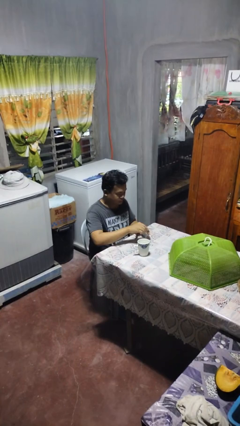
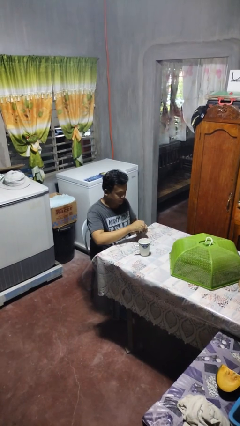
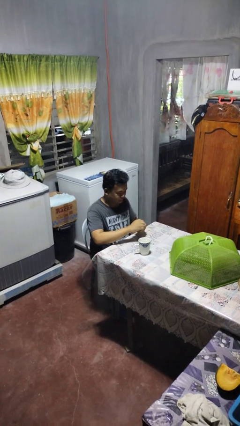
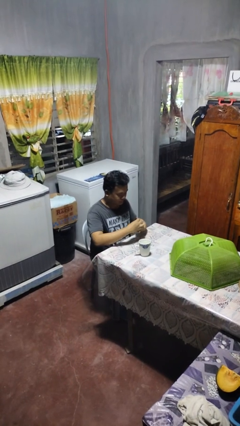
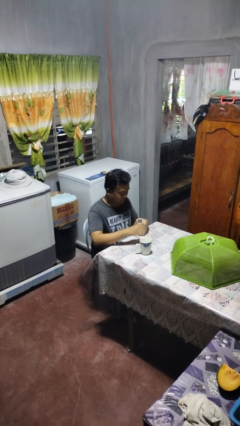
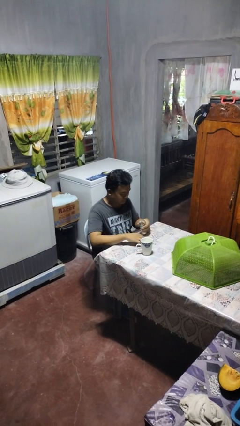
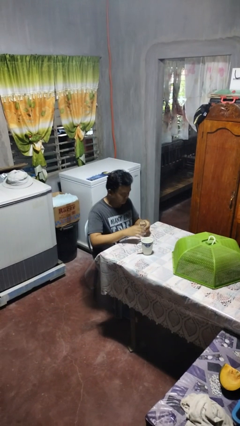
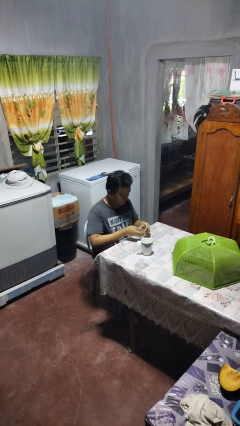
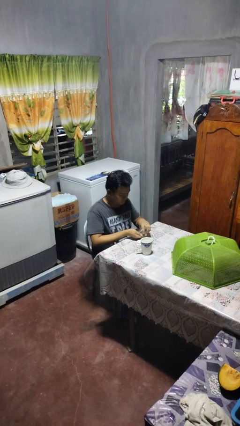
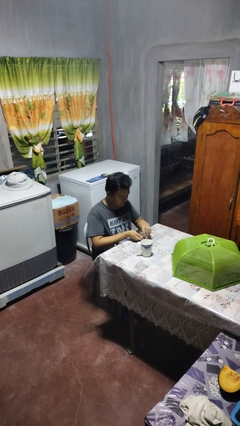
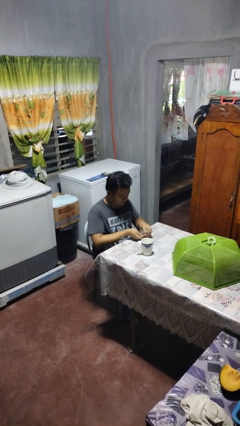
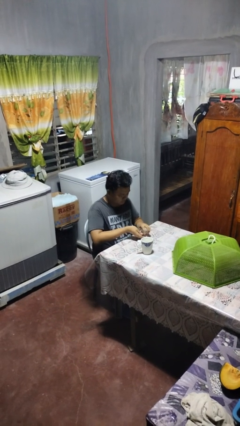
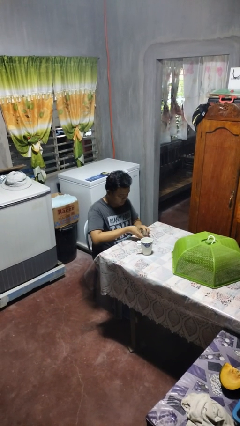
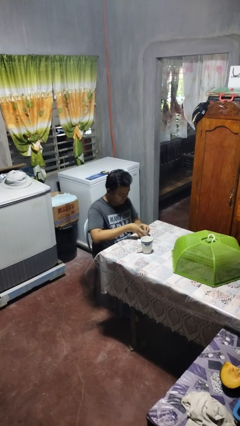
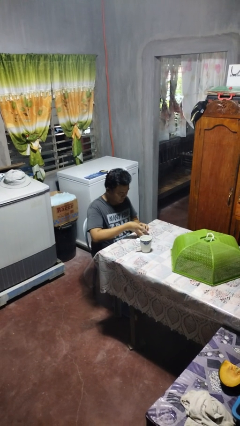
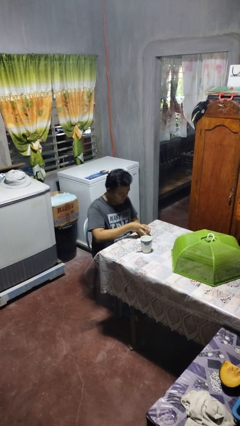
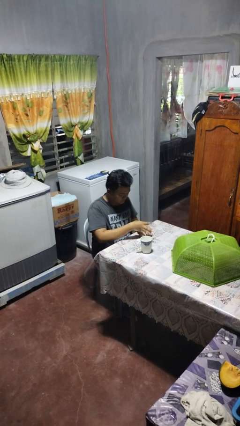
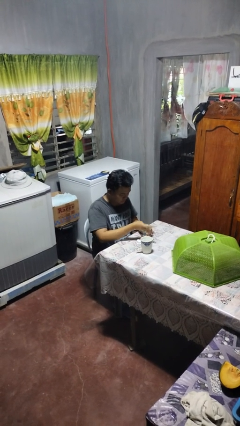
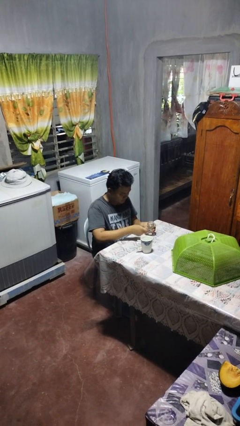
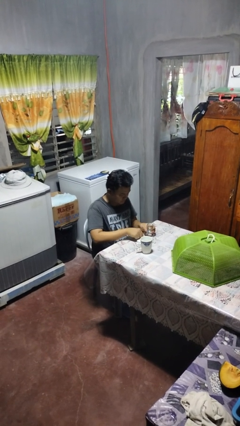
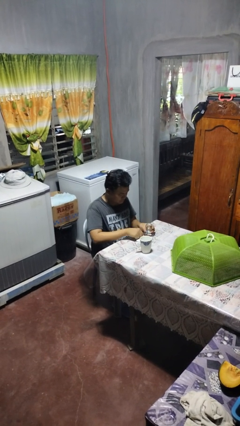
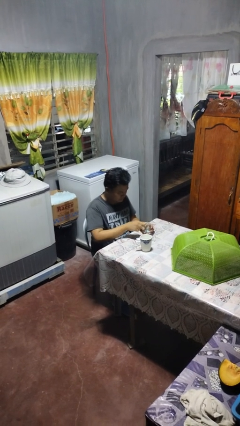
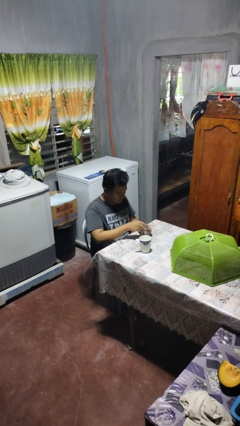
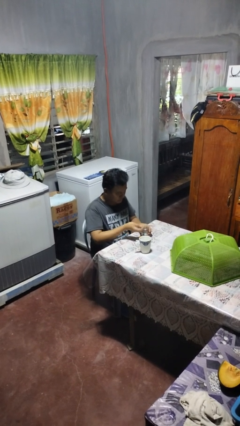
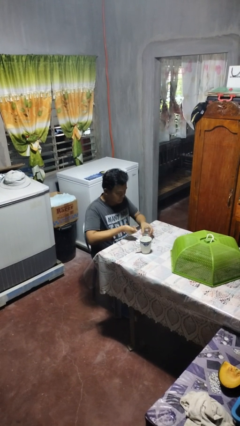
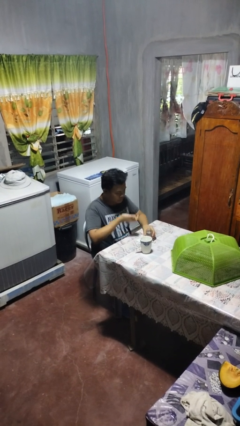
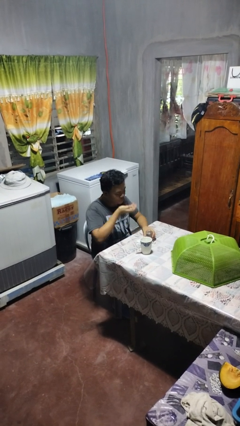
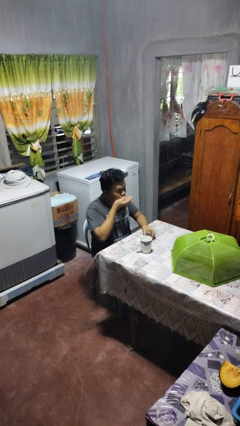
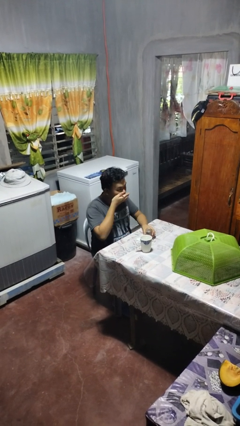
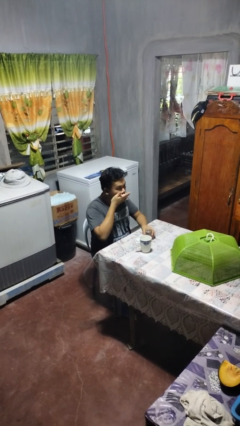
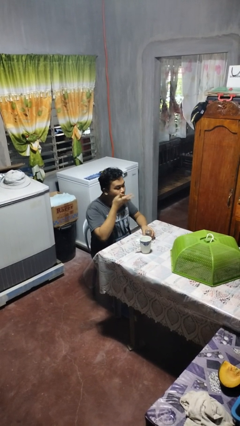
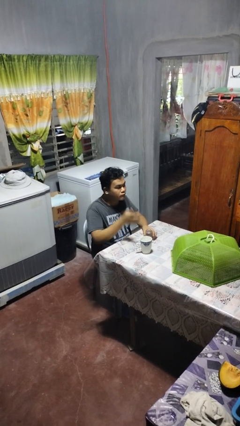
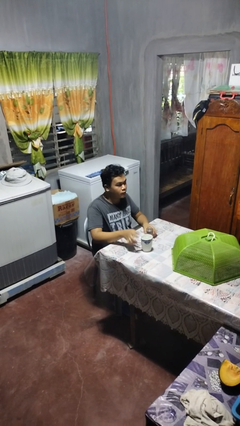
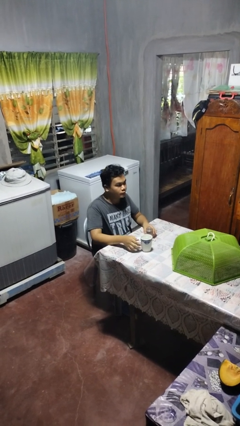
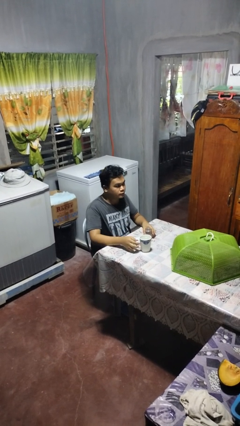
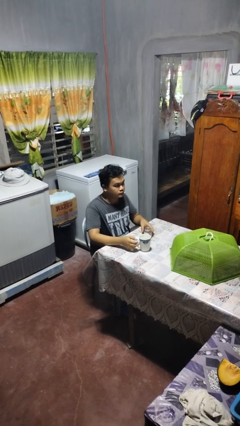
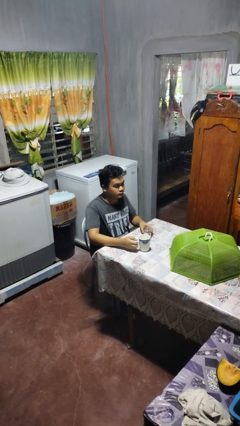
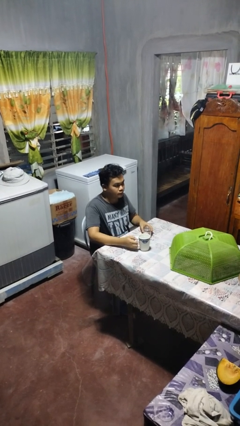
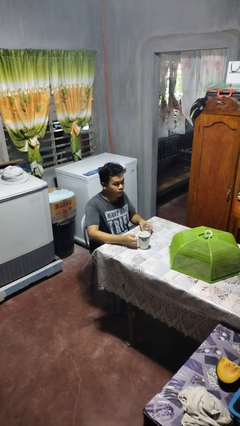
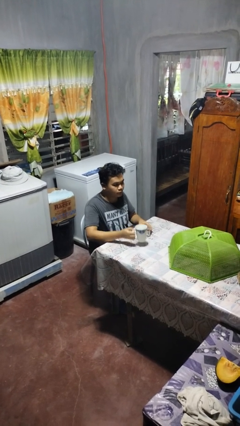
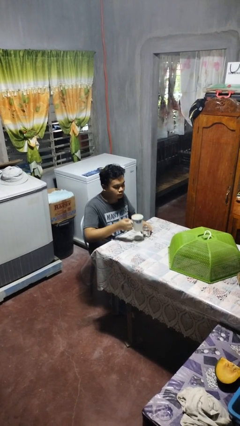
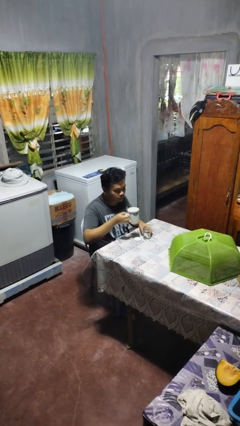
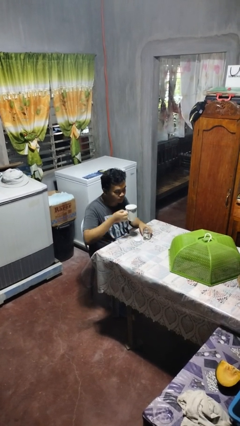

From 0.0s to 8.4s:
person takes medicine pills

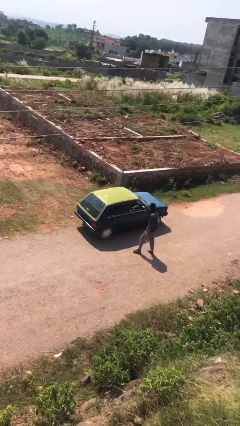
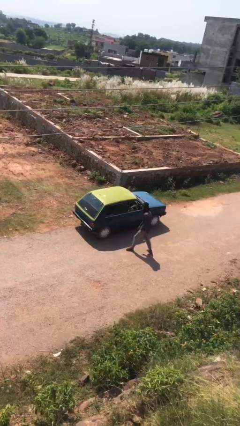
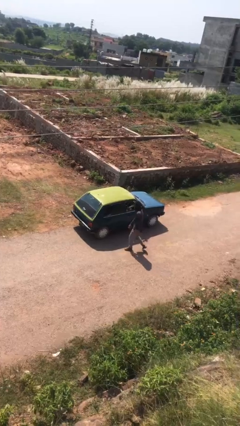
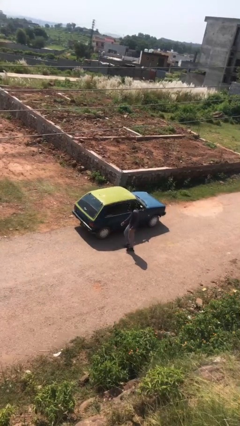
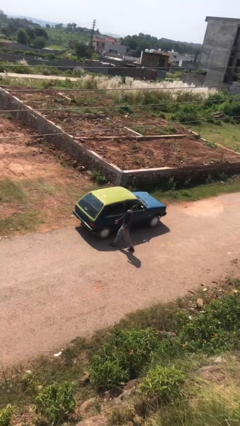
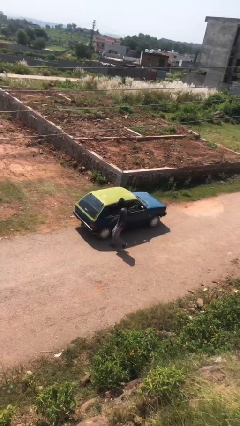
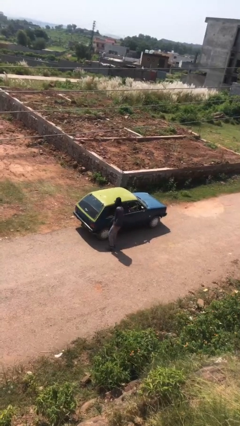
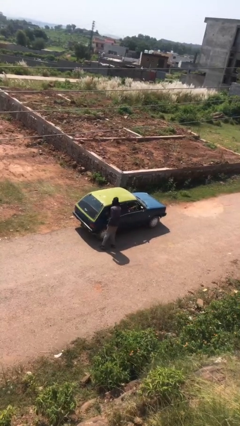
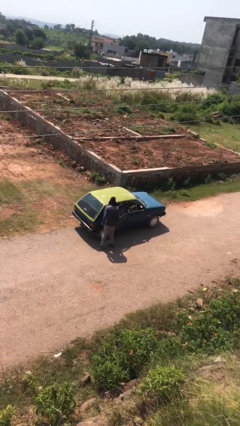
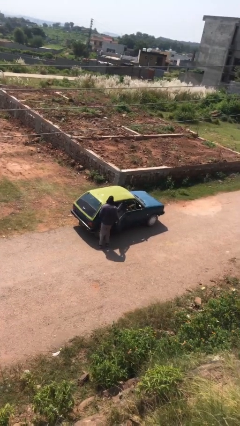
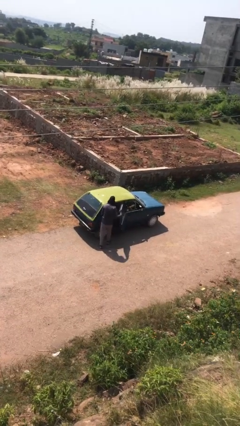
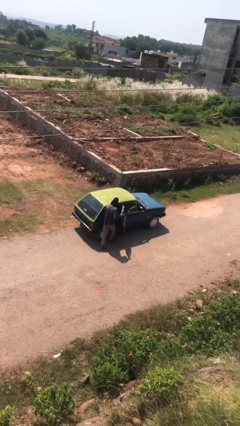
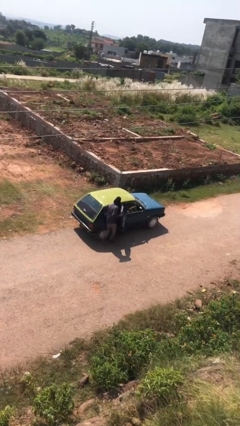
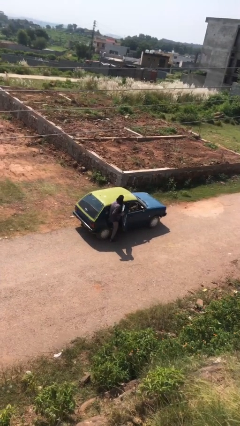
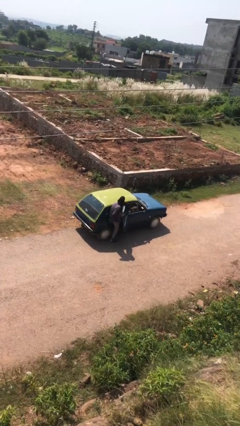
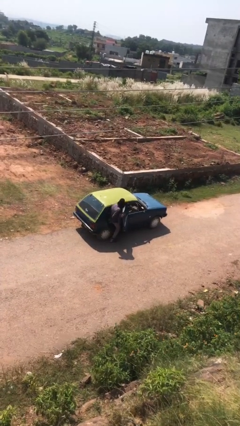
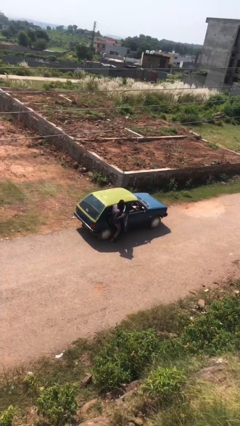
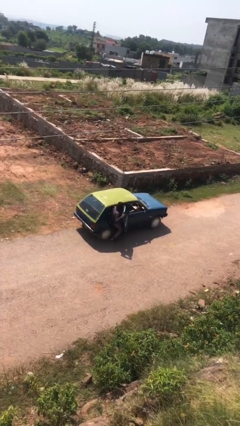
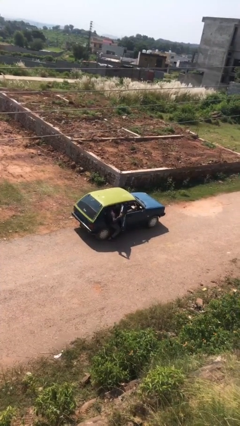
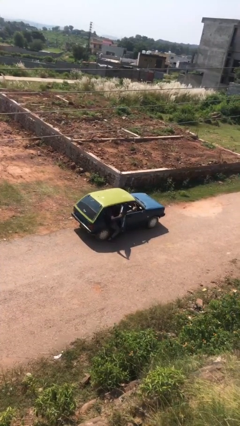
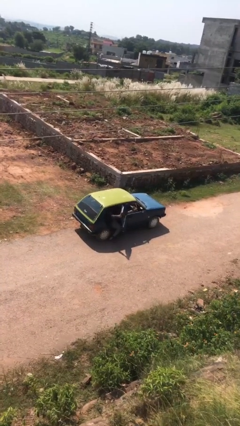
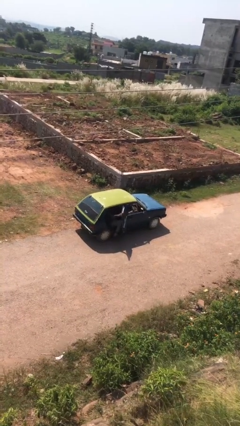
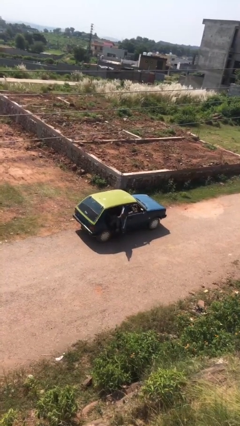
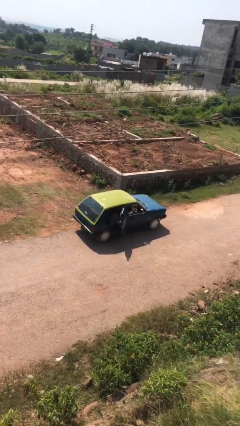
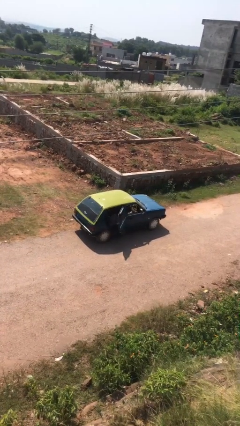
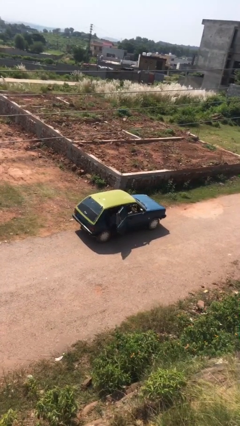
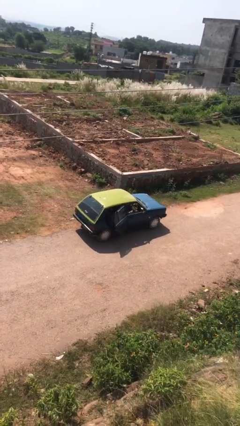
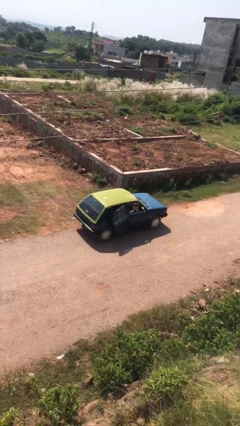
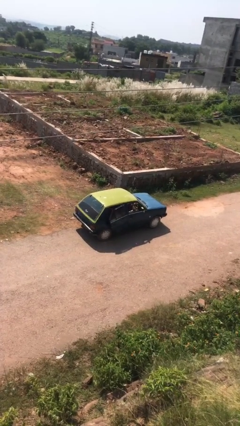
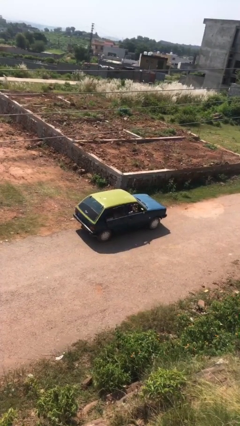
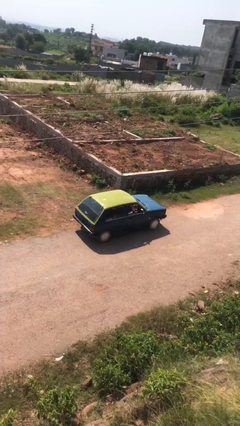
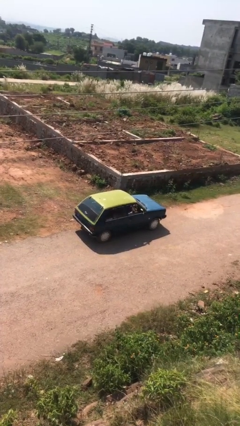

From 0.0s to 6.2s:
car picks up person

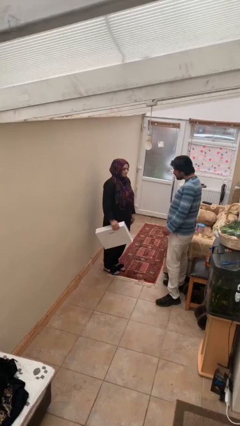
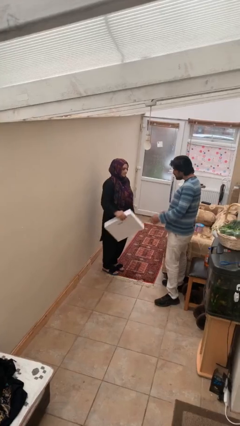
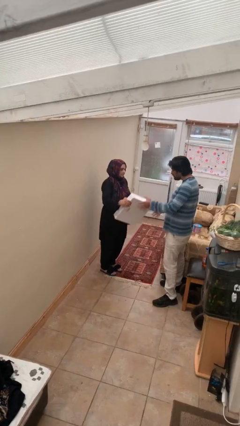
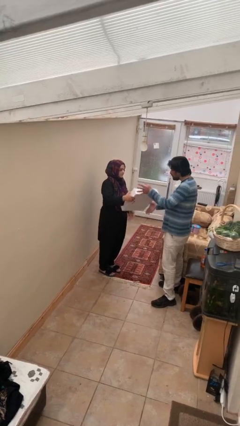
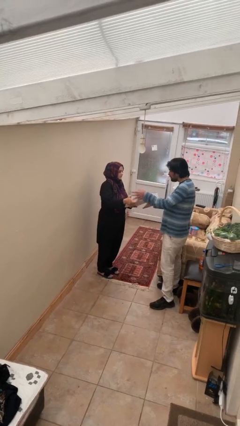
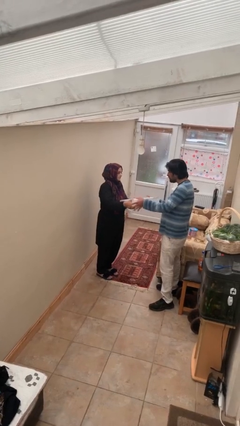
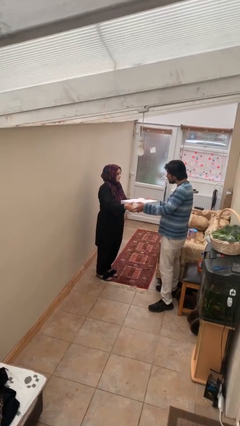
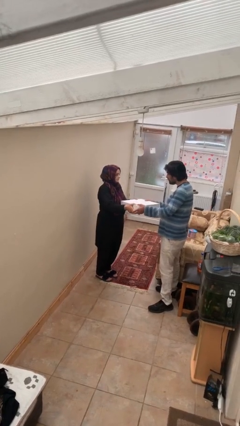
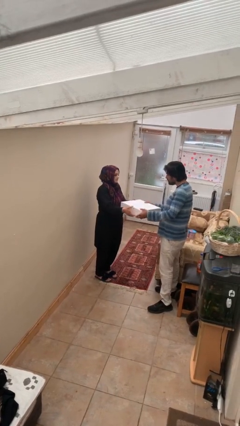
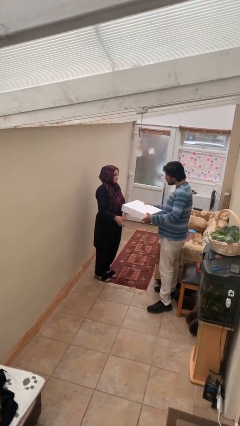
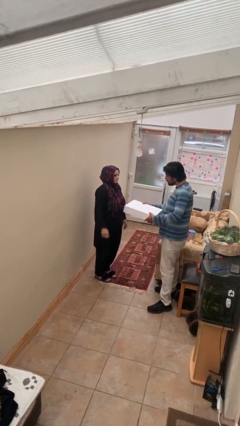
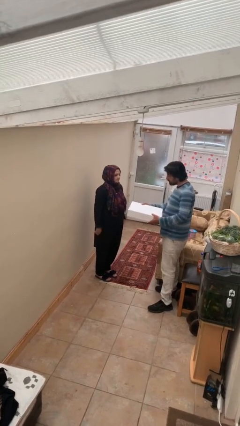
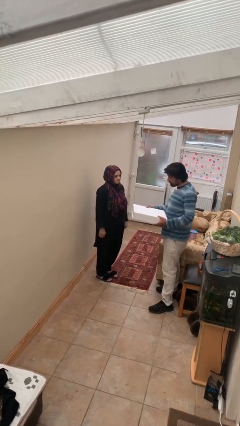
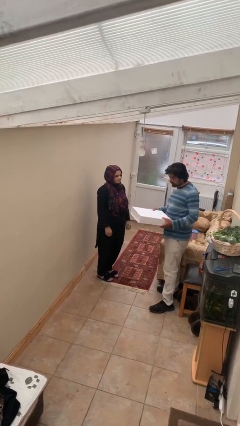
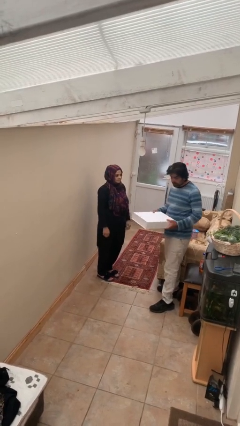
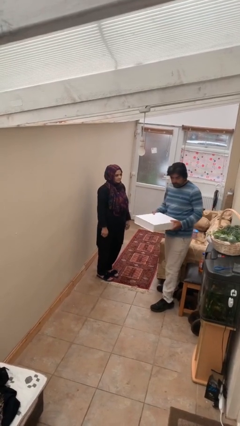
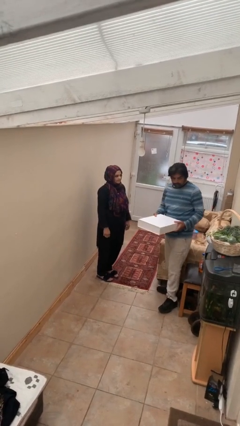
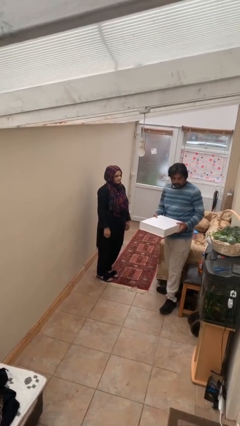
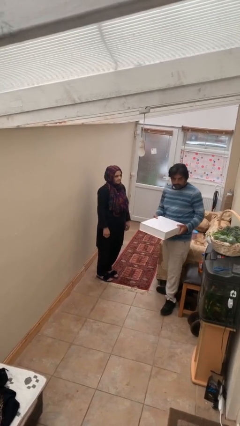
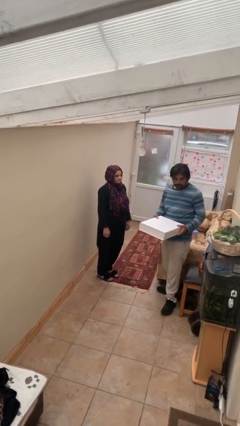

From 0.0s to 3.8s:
person transfers object to person
